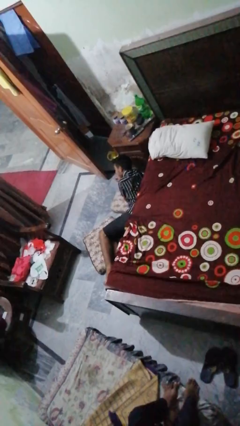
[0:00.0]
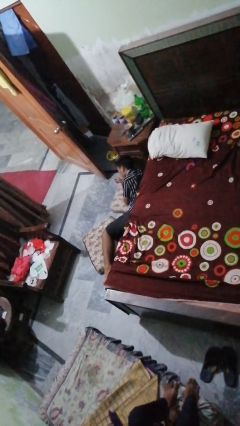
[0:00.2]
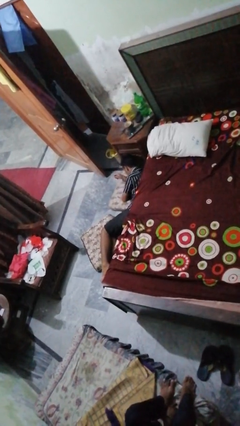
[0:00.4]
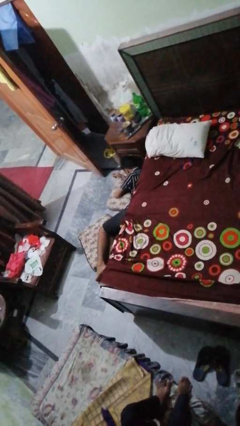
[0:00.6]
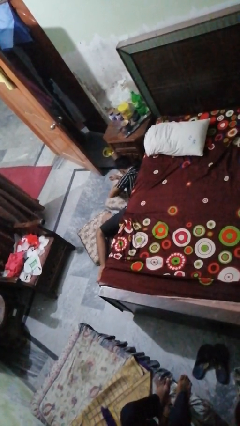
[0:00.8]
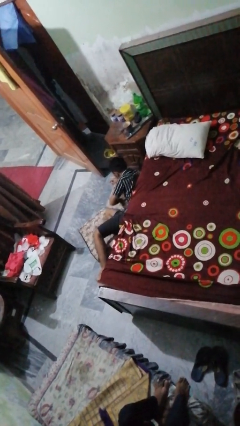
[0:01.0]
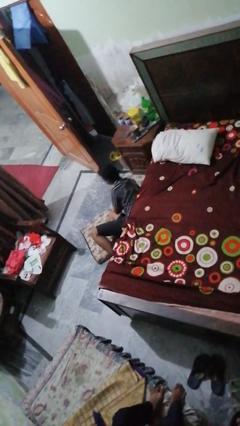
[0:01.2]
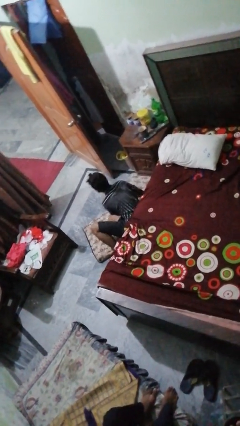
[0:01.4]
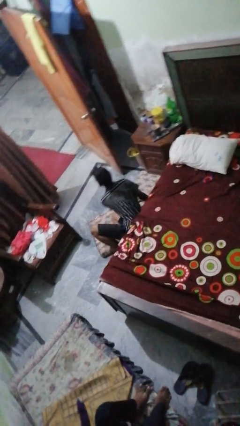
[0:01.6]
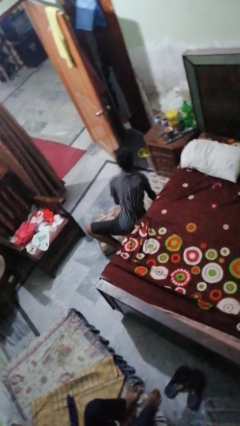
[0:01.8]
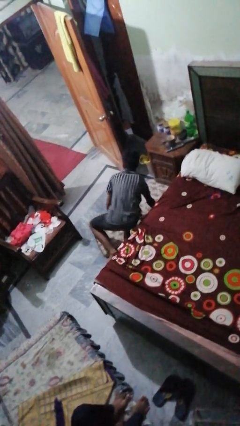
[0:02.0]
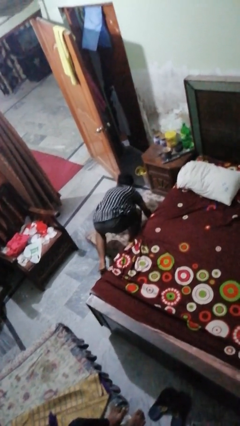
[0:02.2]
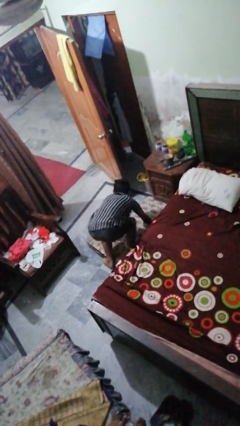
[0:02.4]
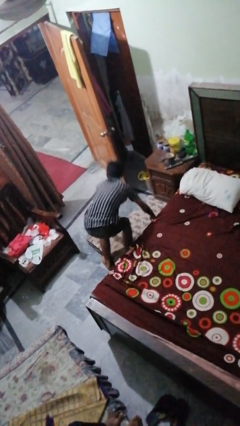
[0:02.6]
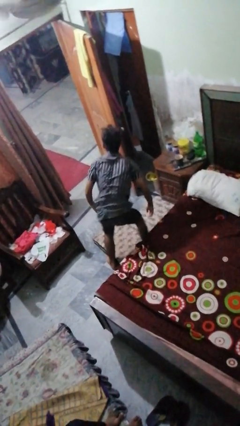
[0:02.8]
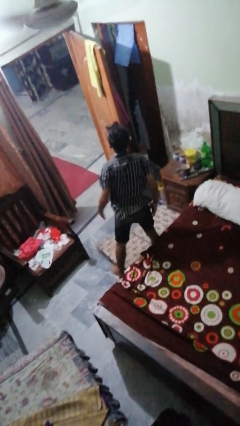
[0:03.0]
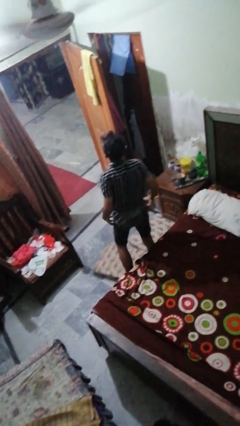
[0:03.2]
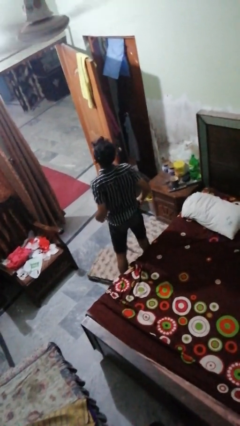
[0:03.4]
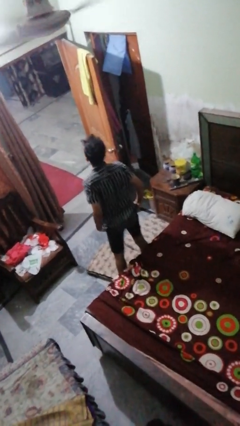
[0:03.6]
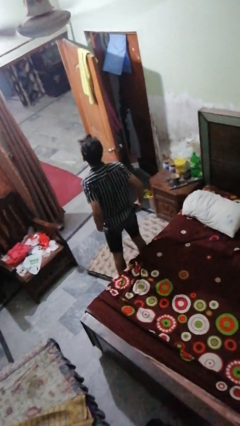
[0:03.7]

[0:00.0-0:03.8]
person stands up from floor

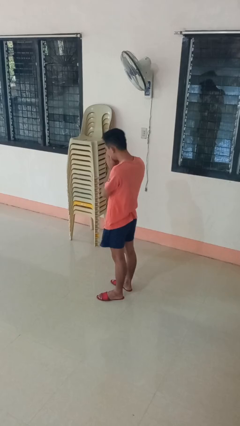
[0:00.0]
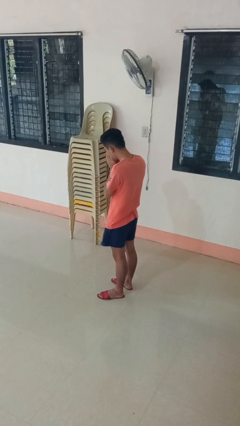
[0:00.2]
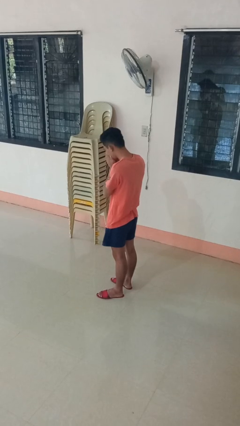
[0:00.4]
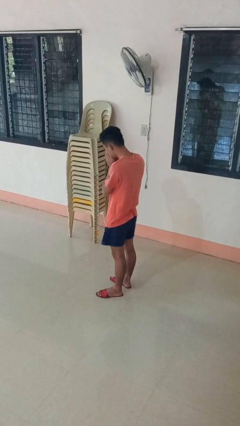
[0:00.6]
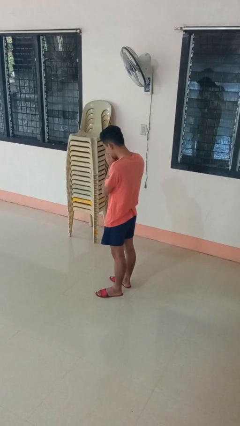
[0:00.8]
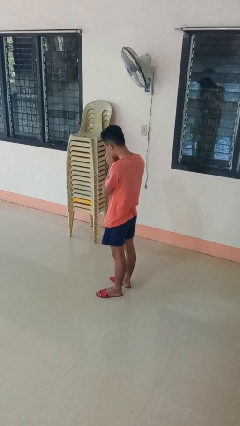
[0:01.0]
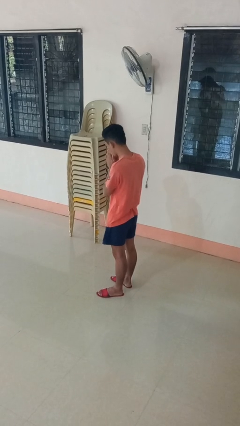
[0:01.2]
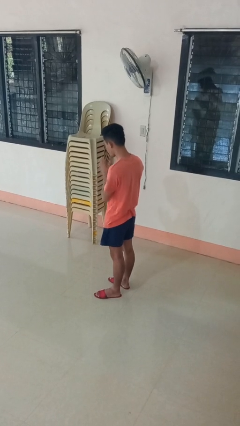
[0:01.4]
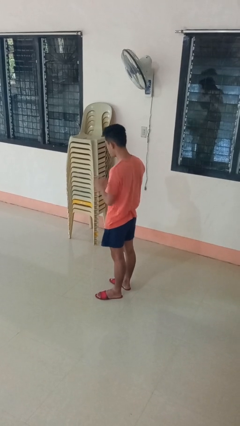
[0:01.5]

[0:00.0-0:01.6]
person sneezes into hand

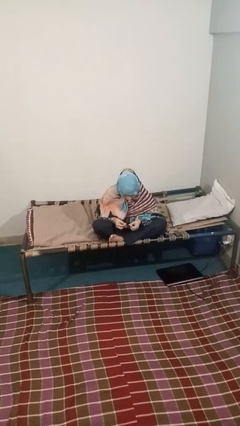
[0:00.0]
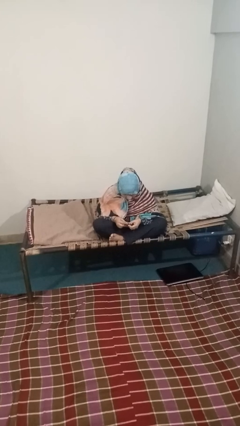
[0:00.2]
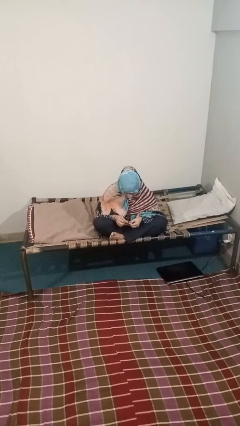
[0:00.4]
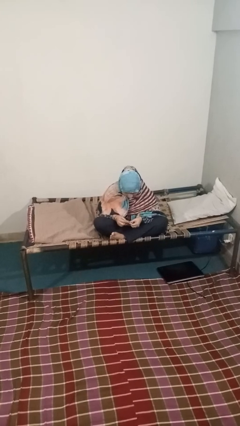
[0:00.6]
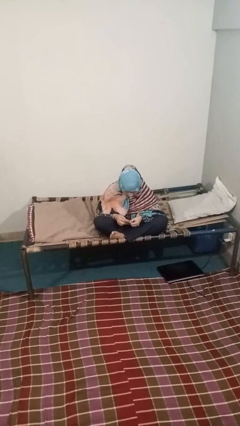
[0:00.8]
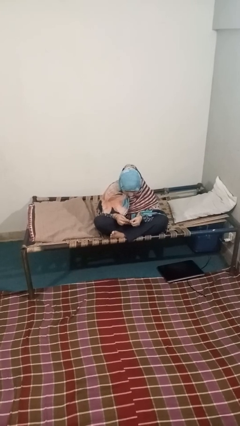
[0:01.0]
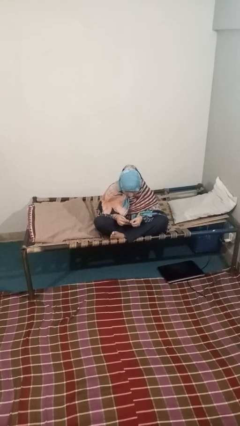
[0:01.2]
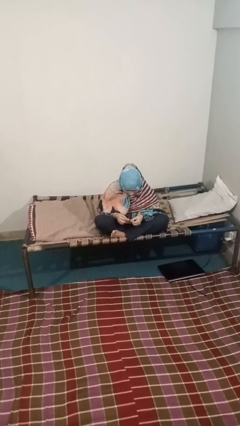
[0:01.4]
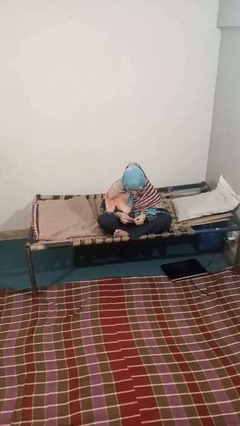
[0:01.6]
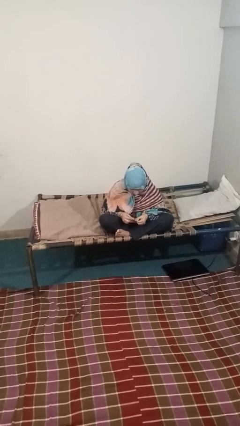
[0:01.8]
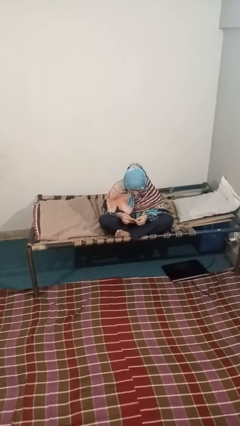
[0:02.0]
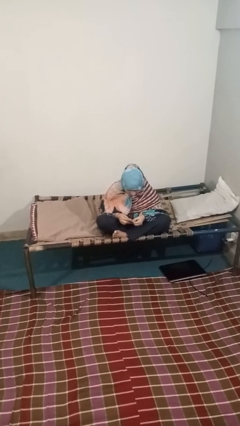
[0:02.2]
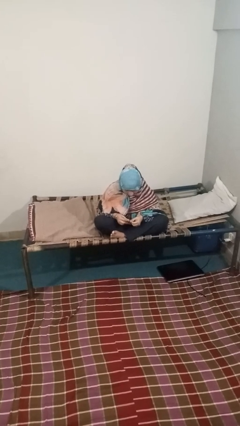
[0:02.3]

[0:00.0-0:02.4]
person files fingernails

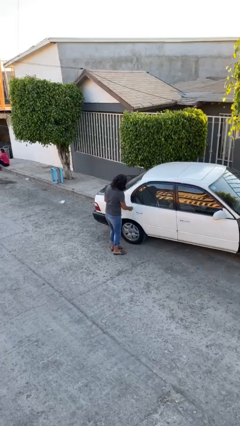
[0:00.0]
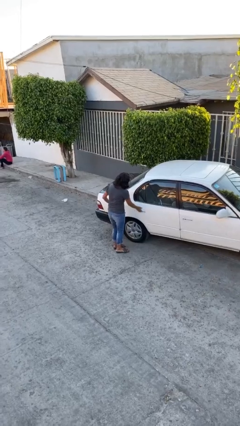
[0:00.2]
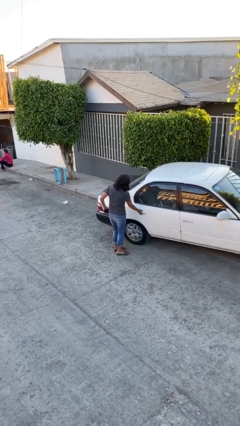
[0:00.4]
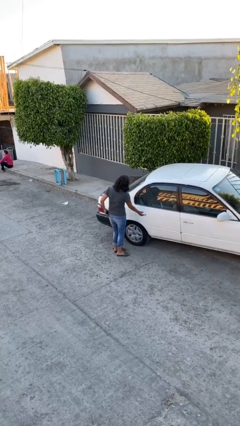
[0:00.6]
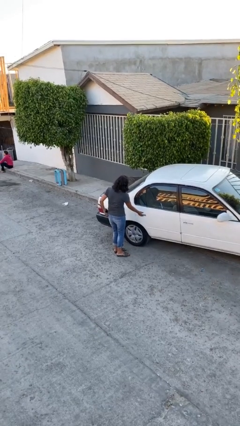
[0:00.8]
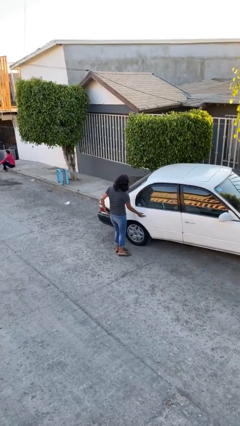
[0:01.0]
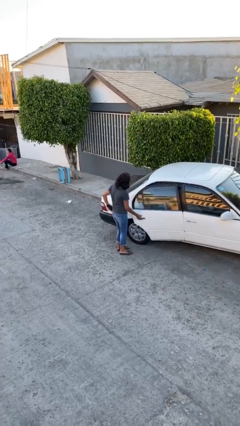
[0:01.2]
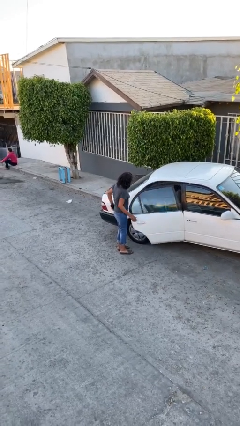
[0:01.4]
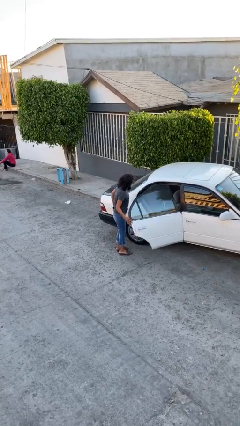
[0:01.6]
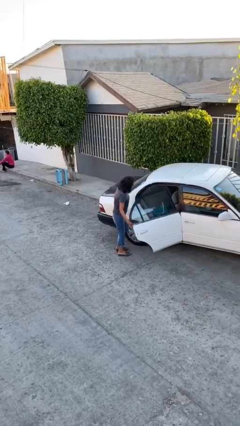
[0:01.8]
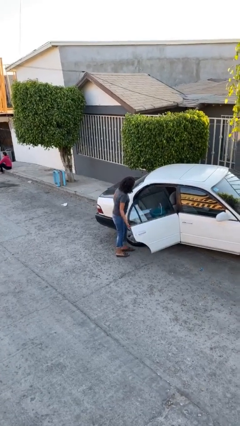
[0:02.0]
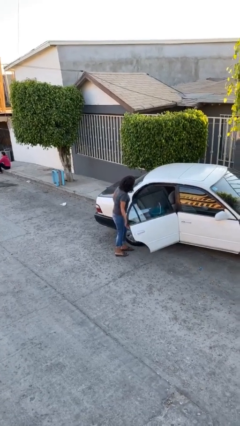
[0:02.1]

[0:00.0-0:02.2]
person opens car door

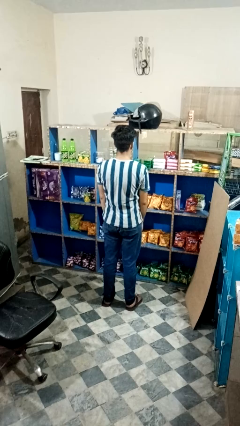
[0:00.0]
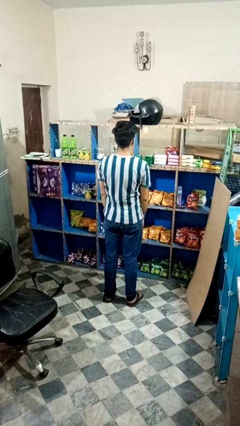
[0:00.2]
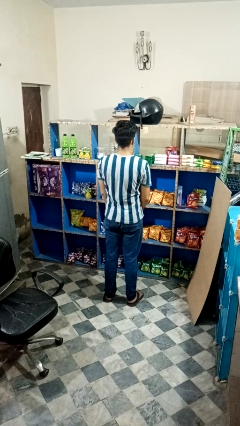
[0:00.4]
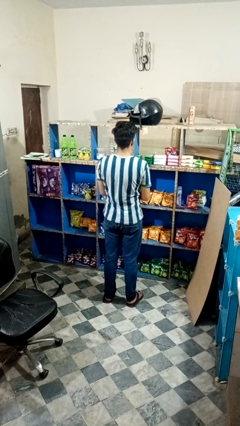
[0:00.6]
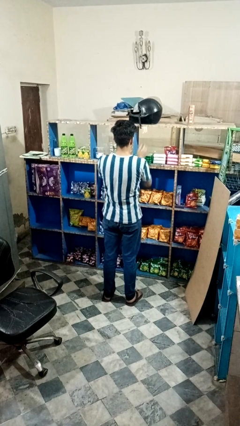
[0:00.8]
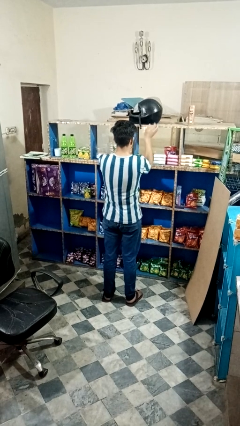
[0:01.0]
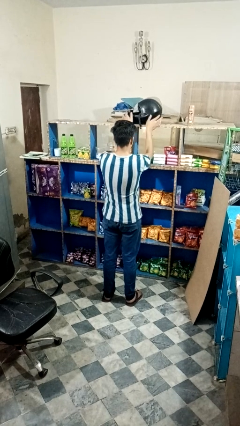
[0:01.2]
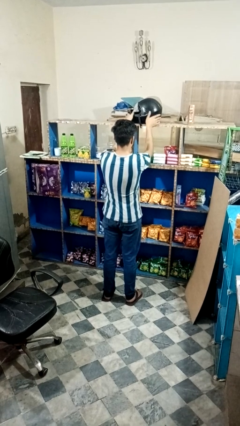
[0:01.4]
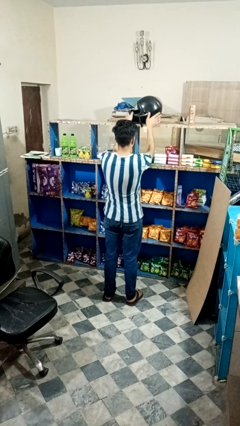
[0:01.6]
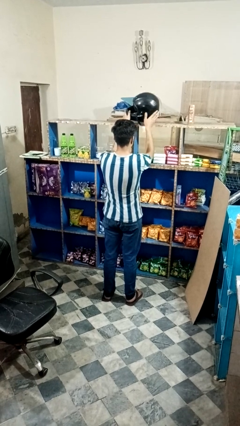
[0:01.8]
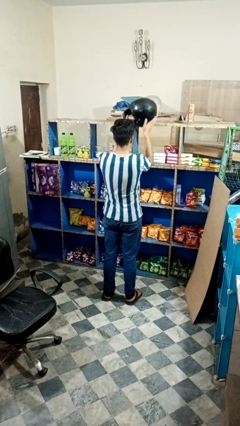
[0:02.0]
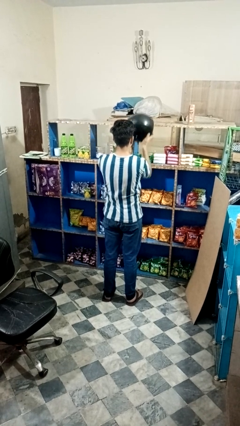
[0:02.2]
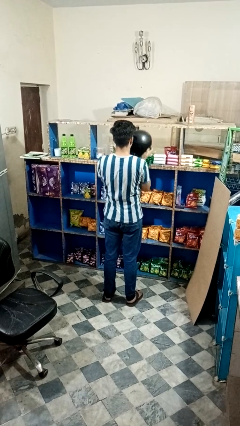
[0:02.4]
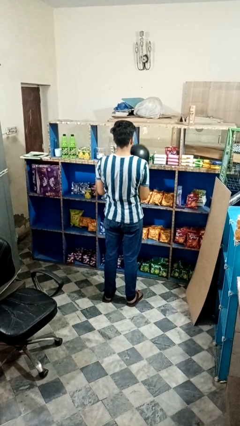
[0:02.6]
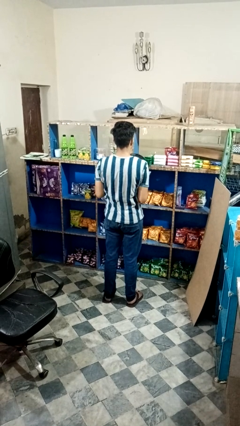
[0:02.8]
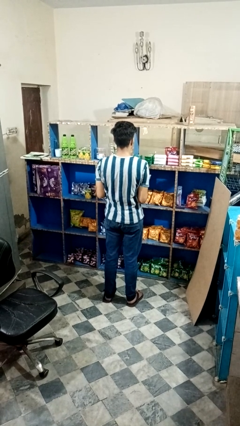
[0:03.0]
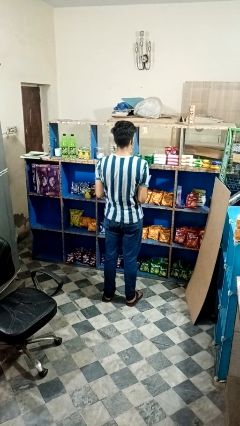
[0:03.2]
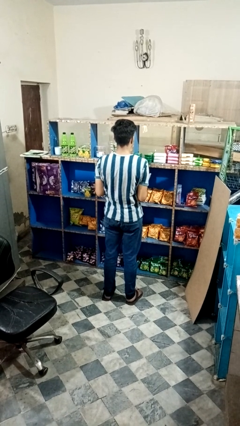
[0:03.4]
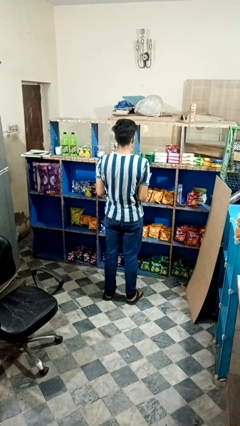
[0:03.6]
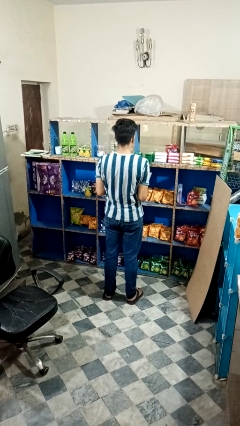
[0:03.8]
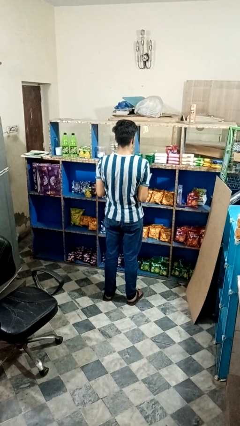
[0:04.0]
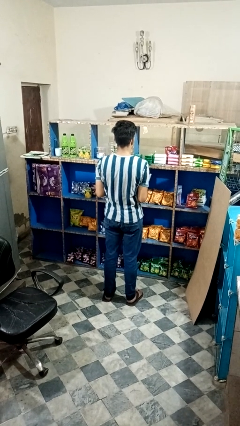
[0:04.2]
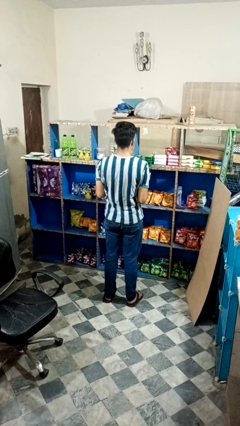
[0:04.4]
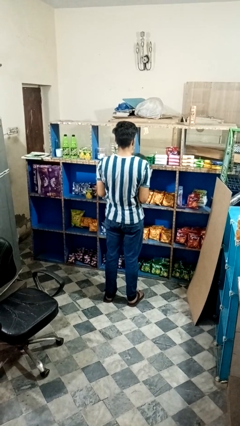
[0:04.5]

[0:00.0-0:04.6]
person picks up object from countertop

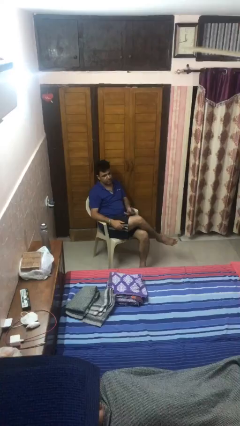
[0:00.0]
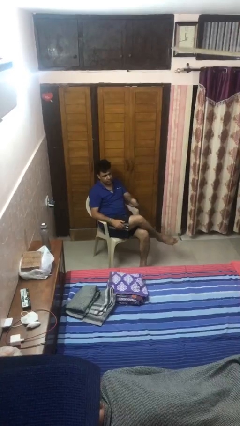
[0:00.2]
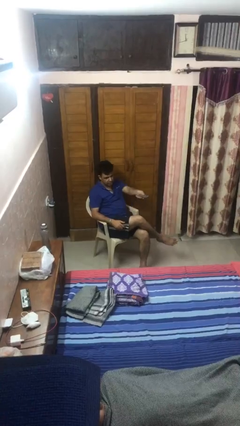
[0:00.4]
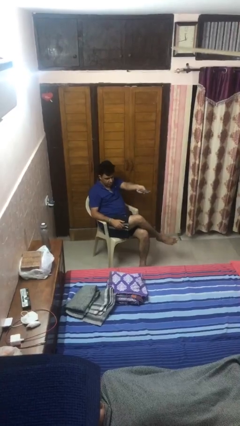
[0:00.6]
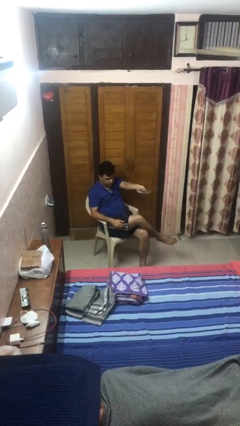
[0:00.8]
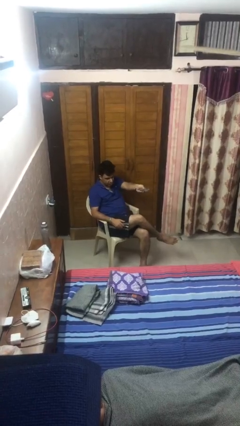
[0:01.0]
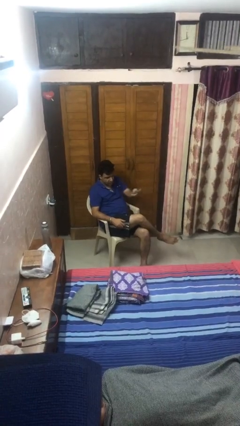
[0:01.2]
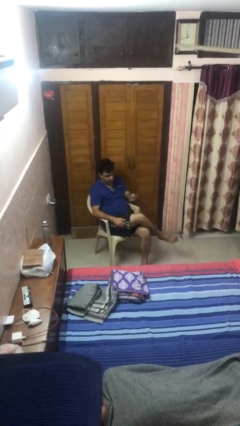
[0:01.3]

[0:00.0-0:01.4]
person uses television remote

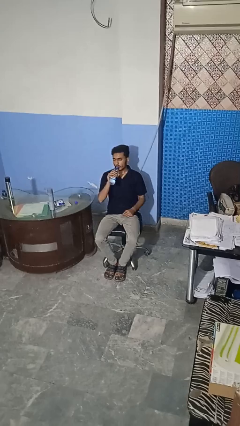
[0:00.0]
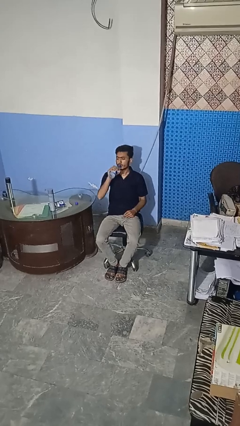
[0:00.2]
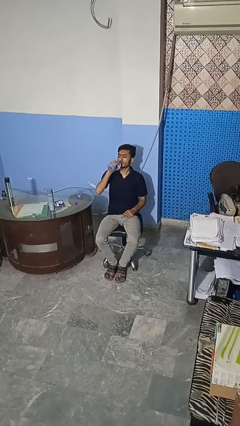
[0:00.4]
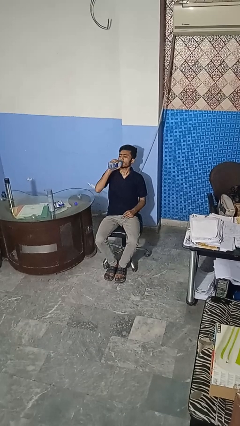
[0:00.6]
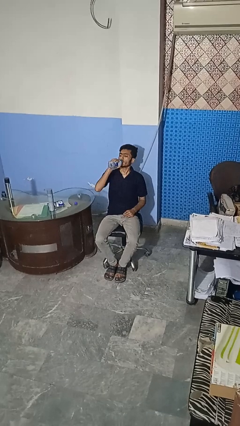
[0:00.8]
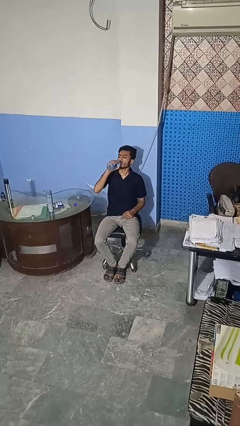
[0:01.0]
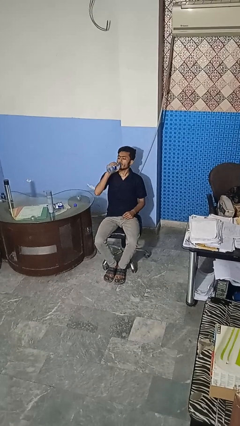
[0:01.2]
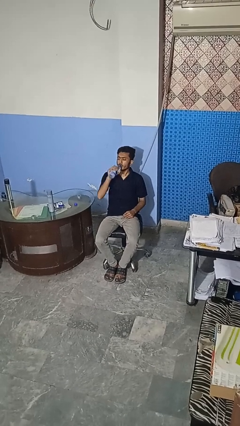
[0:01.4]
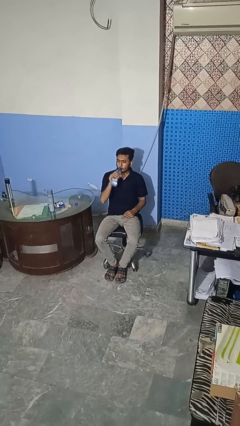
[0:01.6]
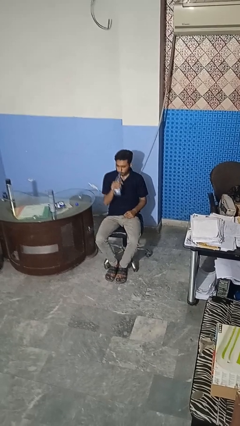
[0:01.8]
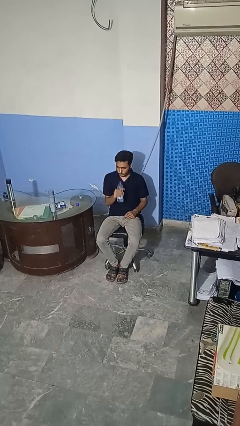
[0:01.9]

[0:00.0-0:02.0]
person drinks from bottle
